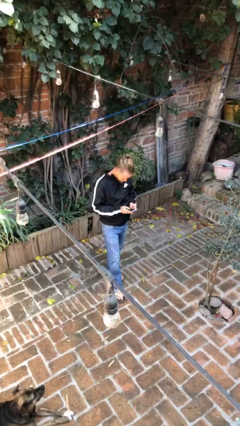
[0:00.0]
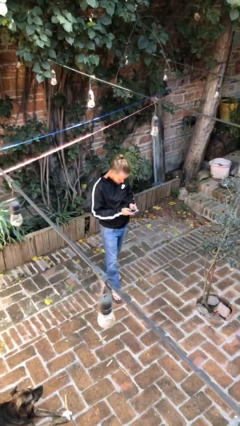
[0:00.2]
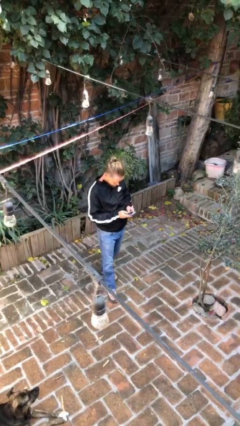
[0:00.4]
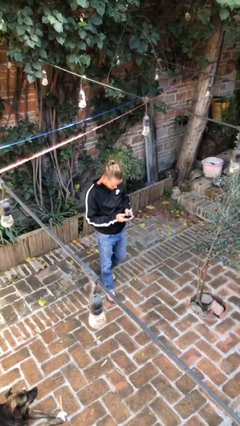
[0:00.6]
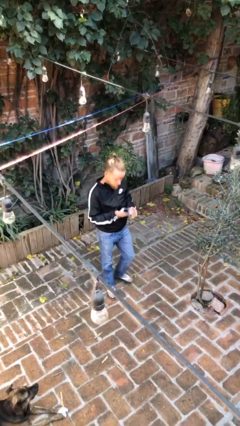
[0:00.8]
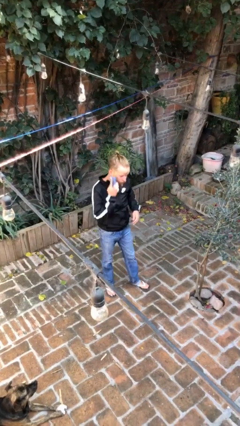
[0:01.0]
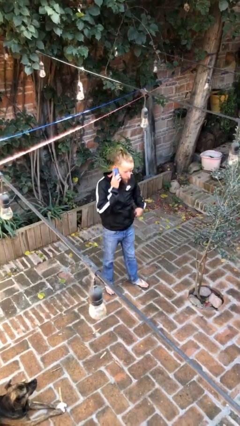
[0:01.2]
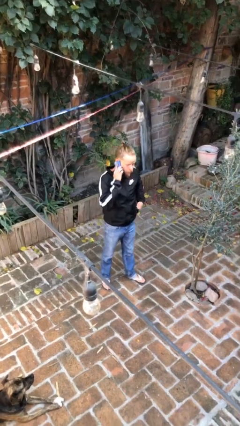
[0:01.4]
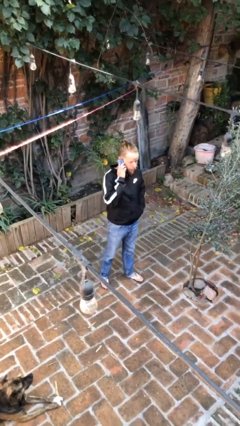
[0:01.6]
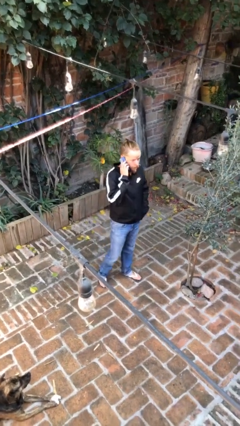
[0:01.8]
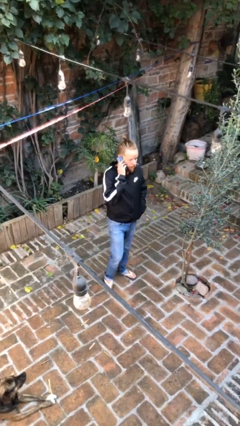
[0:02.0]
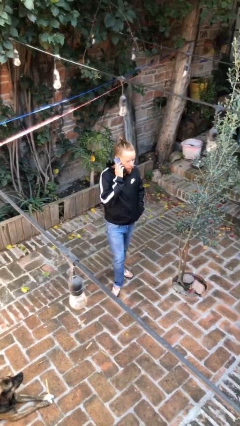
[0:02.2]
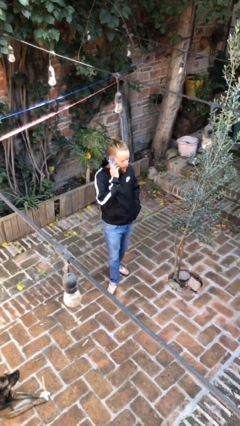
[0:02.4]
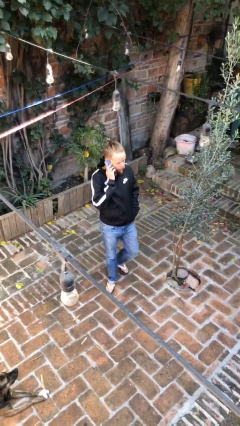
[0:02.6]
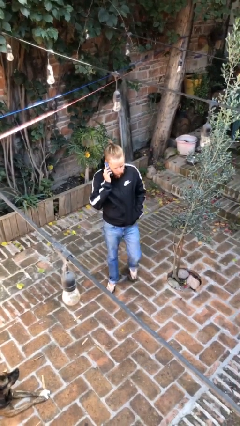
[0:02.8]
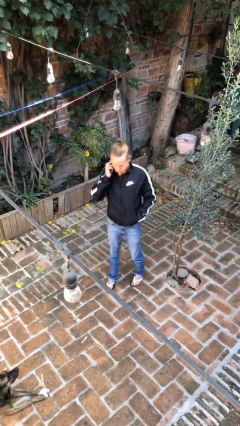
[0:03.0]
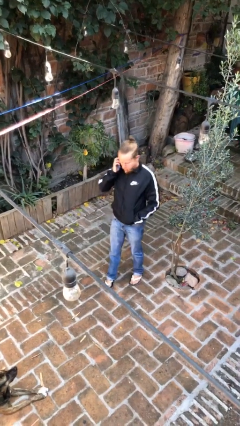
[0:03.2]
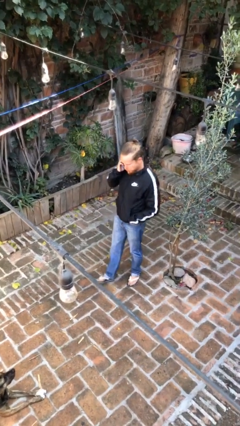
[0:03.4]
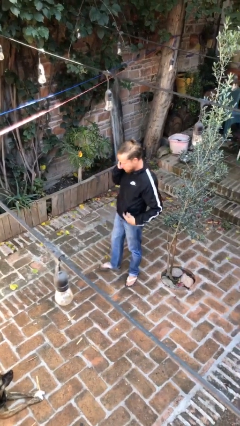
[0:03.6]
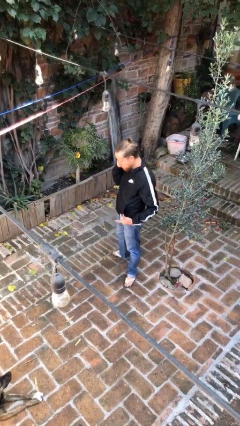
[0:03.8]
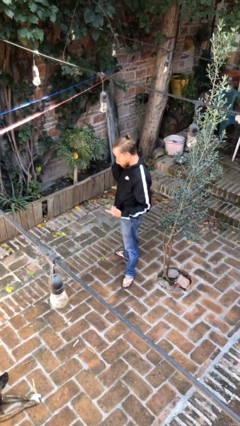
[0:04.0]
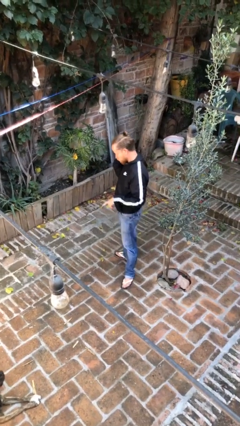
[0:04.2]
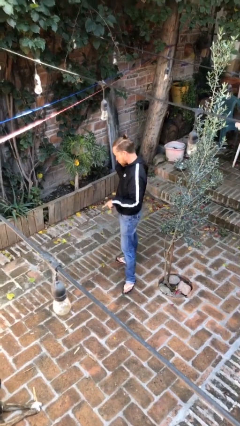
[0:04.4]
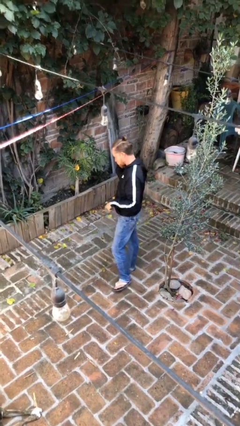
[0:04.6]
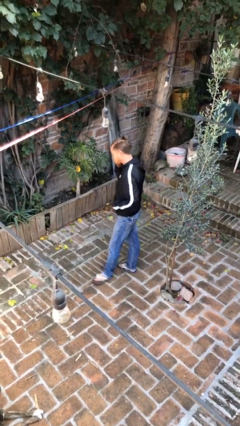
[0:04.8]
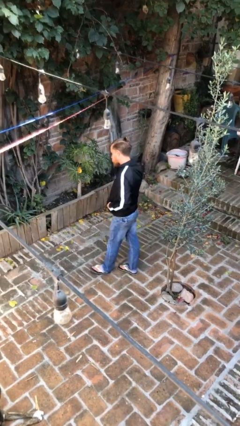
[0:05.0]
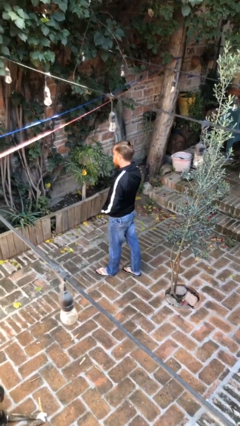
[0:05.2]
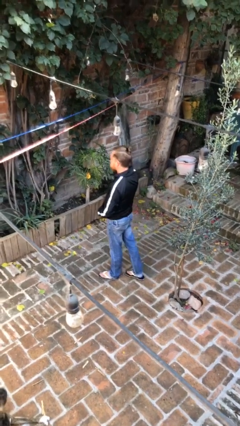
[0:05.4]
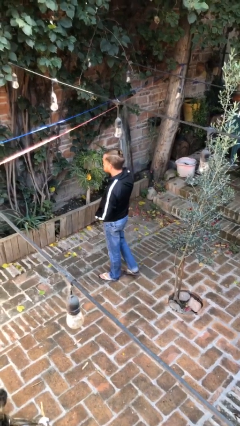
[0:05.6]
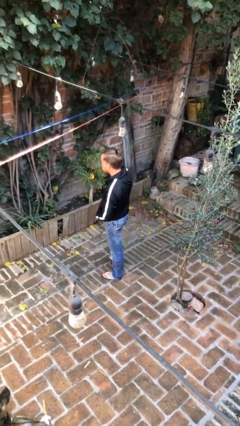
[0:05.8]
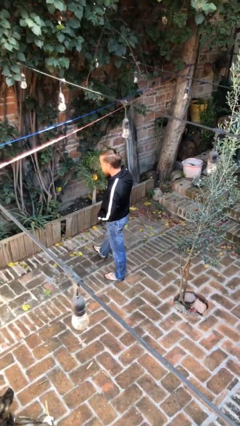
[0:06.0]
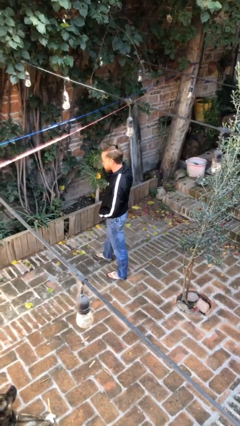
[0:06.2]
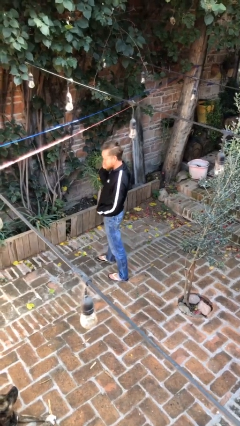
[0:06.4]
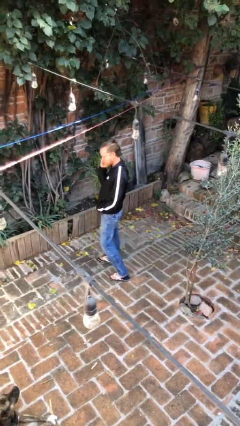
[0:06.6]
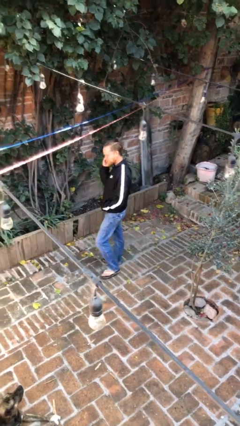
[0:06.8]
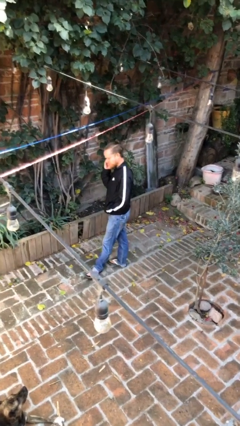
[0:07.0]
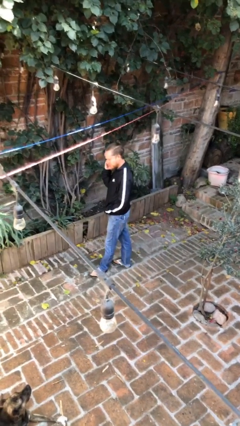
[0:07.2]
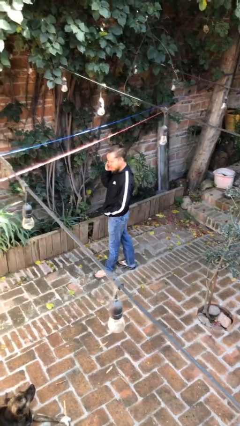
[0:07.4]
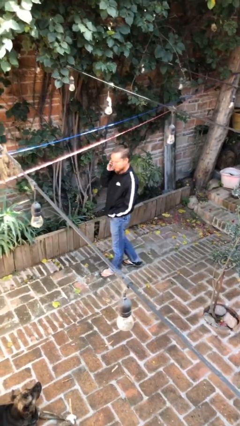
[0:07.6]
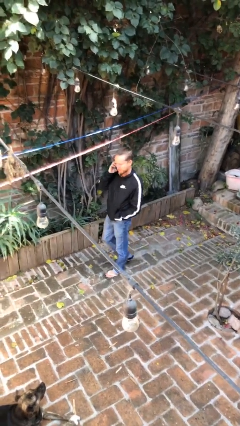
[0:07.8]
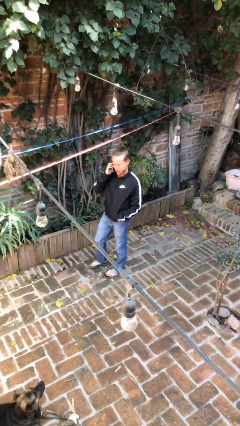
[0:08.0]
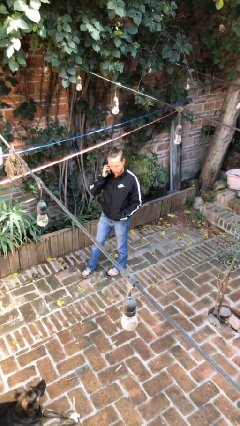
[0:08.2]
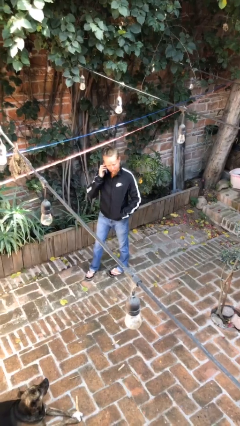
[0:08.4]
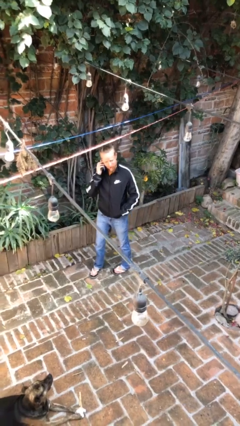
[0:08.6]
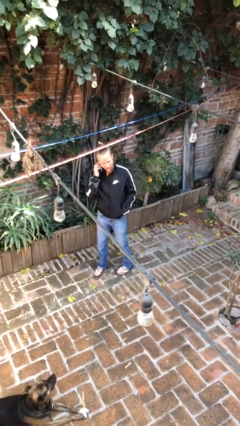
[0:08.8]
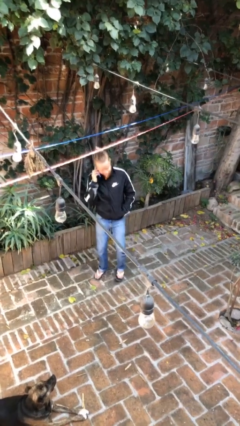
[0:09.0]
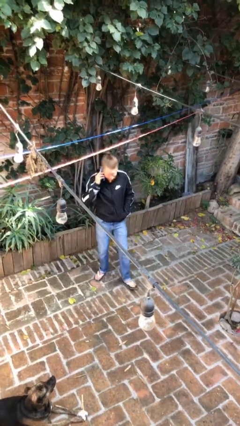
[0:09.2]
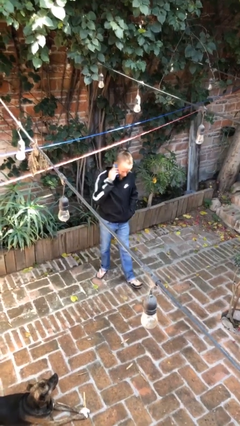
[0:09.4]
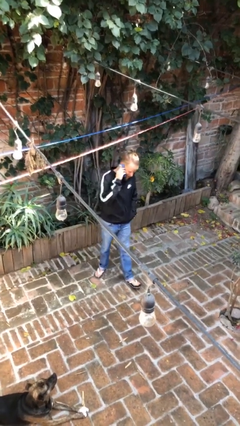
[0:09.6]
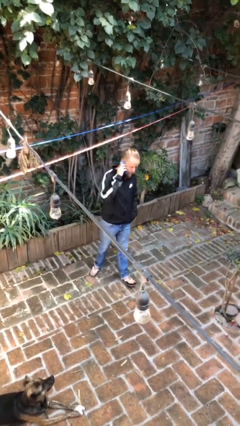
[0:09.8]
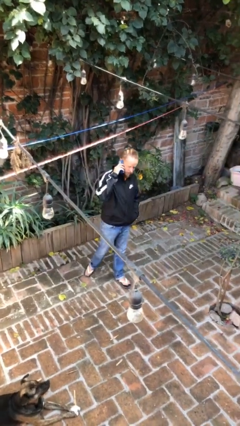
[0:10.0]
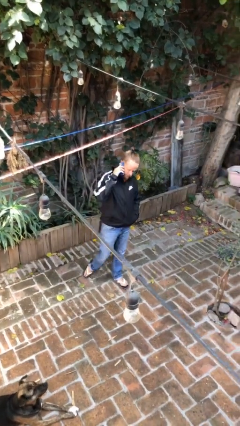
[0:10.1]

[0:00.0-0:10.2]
person talks on phone

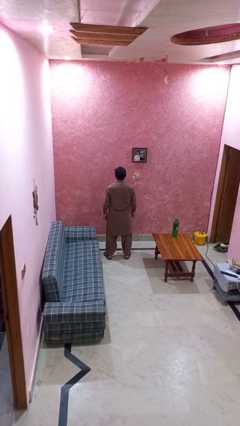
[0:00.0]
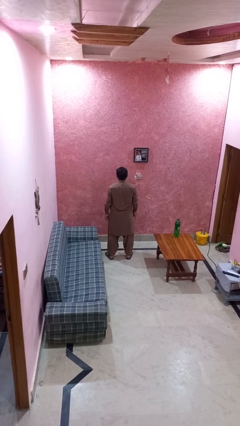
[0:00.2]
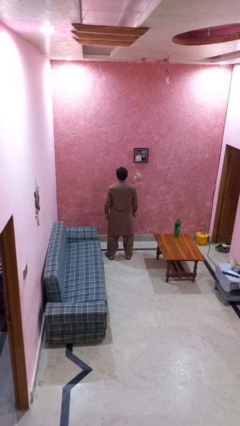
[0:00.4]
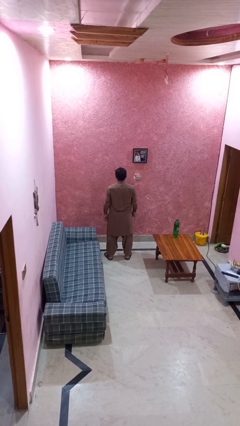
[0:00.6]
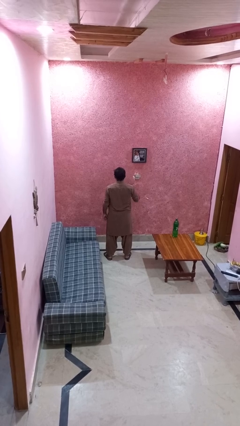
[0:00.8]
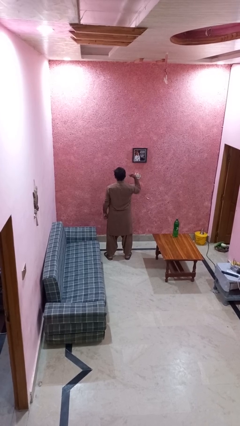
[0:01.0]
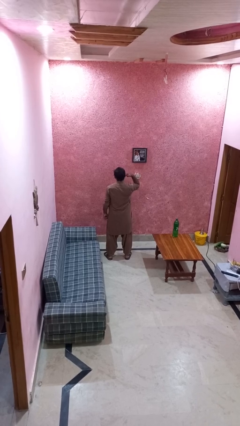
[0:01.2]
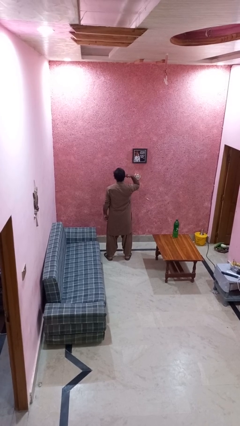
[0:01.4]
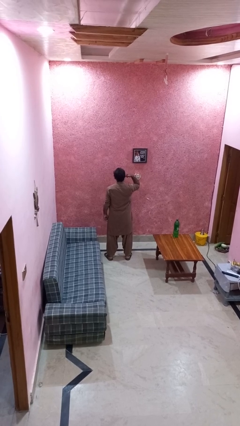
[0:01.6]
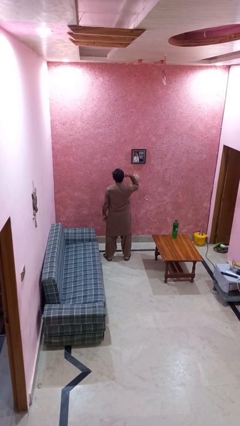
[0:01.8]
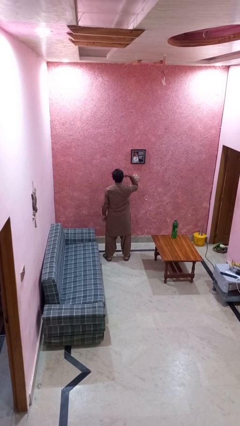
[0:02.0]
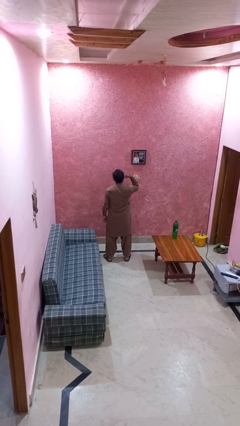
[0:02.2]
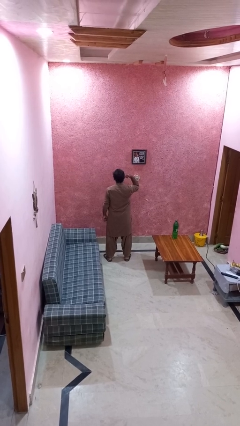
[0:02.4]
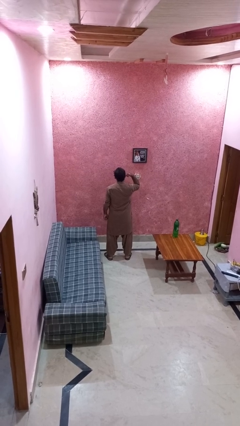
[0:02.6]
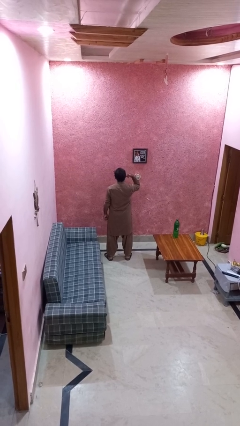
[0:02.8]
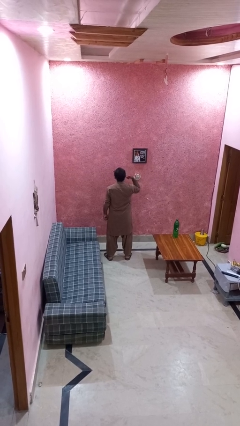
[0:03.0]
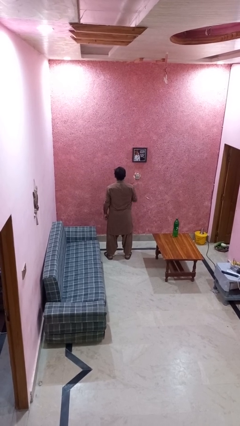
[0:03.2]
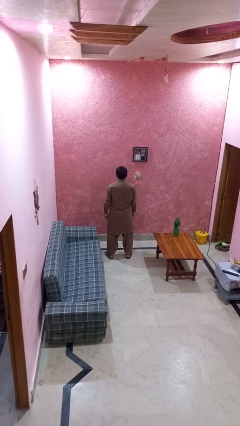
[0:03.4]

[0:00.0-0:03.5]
person gestures call me

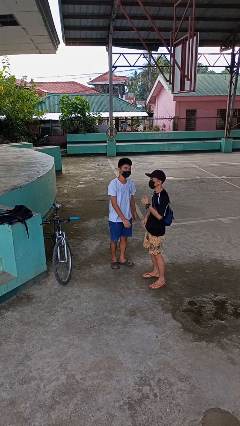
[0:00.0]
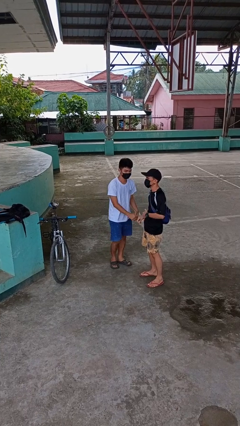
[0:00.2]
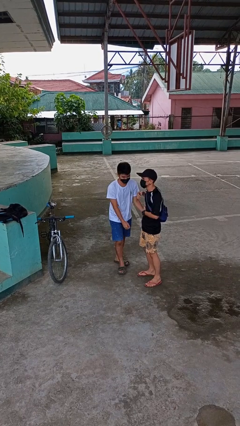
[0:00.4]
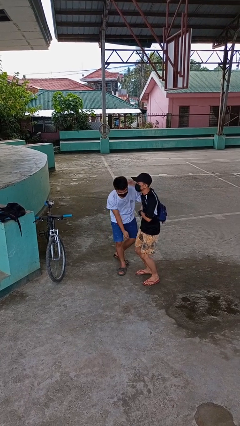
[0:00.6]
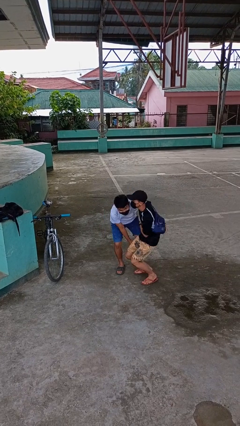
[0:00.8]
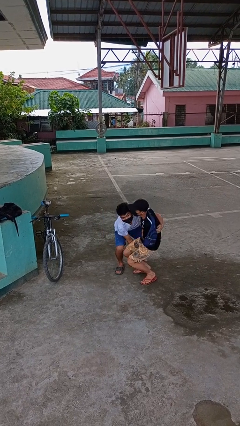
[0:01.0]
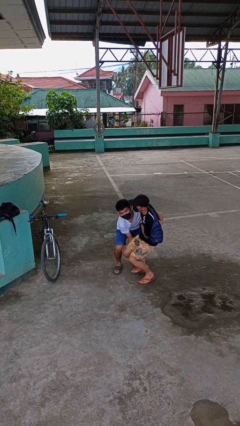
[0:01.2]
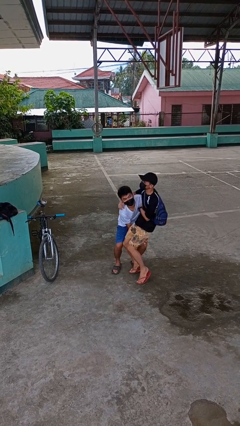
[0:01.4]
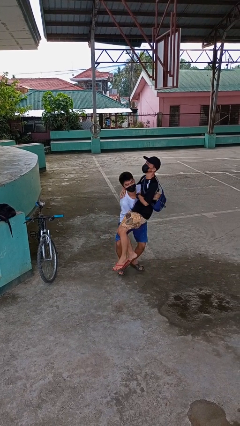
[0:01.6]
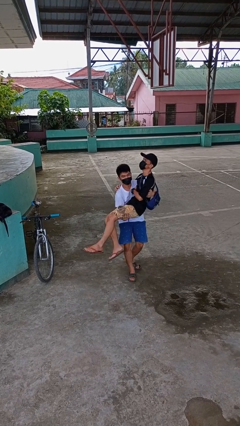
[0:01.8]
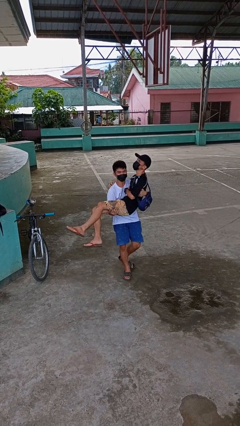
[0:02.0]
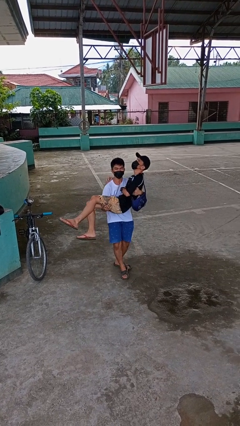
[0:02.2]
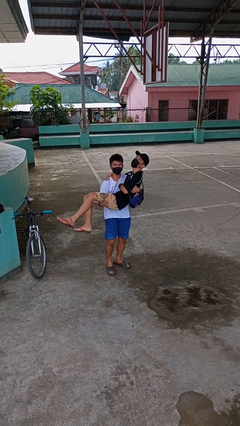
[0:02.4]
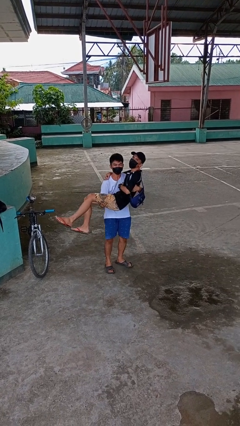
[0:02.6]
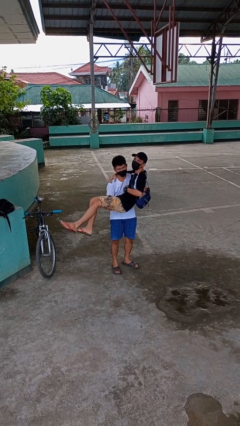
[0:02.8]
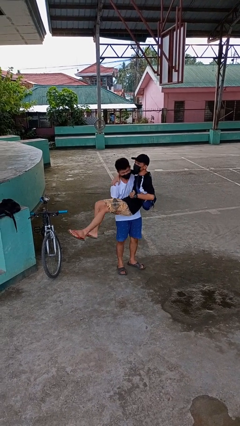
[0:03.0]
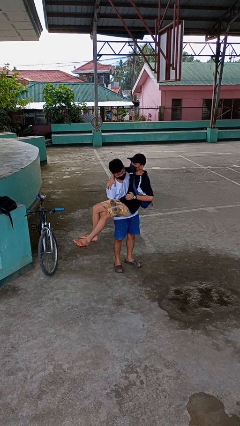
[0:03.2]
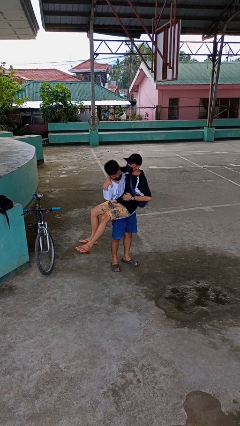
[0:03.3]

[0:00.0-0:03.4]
person picks up person

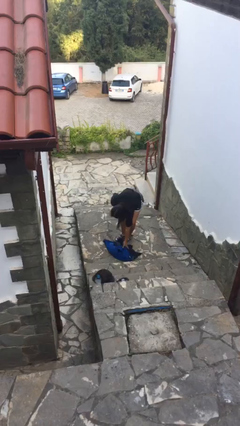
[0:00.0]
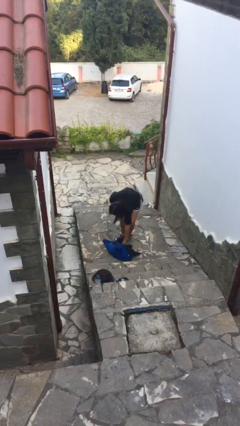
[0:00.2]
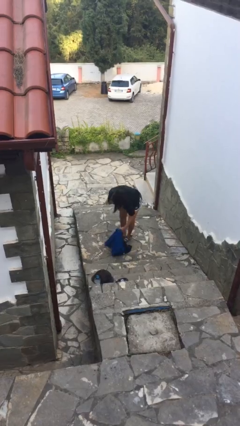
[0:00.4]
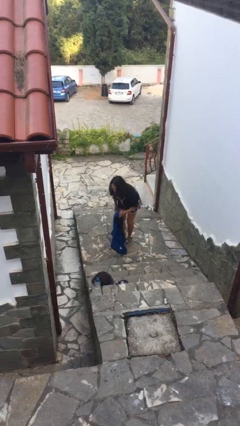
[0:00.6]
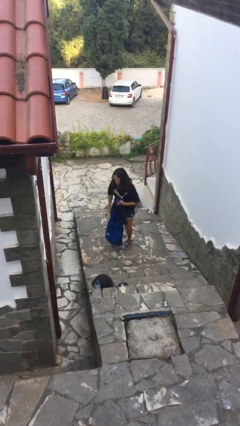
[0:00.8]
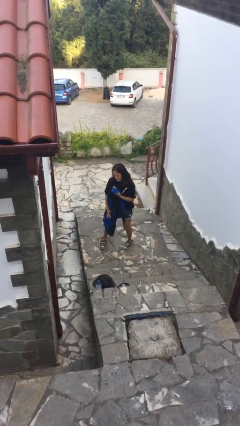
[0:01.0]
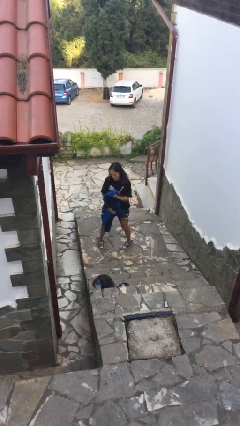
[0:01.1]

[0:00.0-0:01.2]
person picks up object from floor
